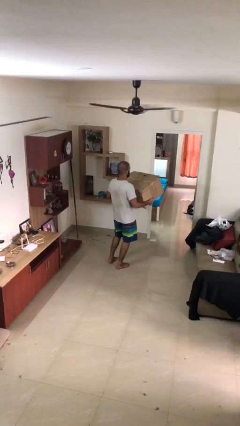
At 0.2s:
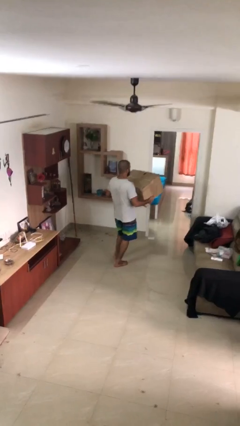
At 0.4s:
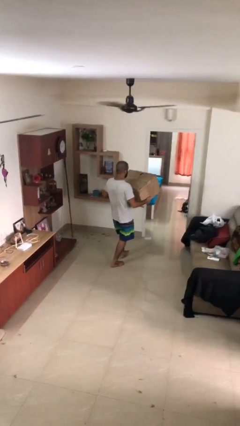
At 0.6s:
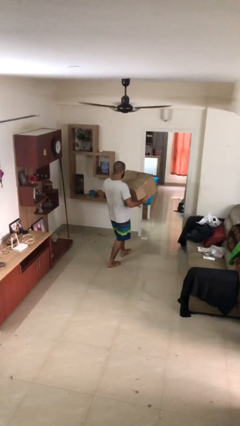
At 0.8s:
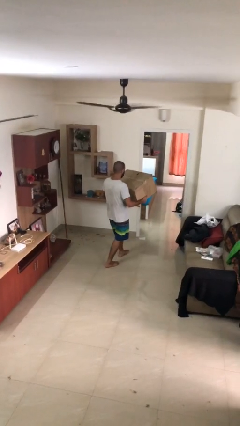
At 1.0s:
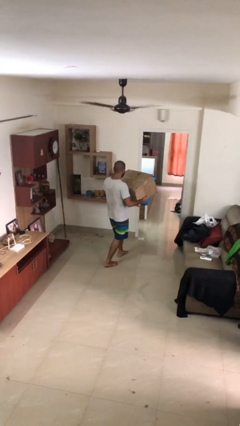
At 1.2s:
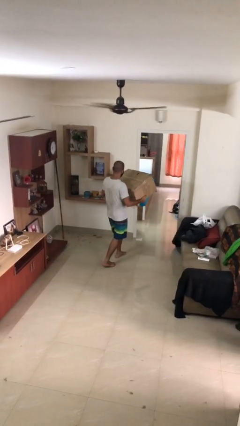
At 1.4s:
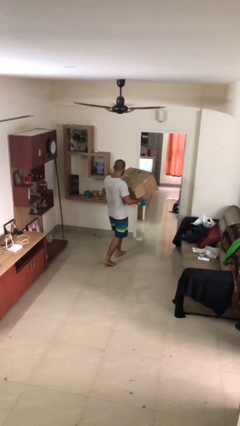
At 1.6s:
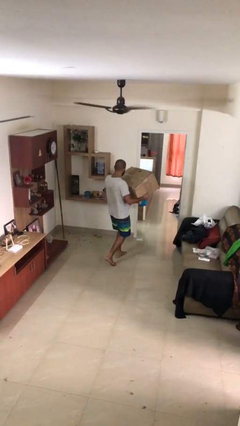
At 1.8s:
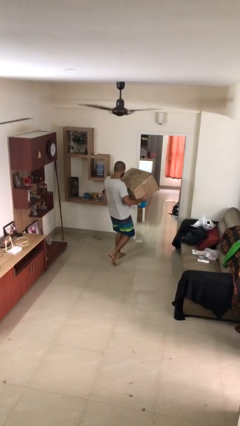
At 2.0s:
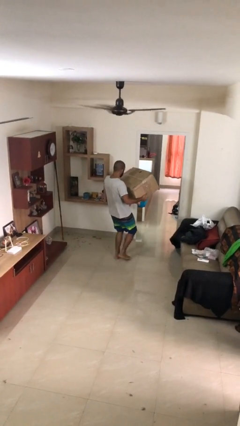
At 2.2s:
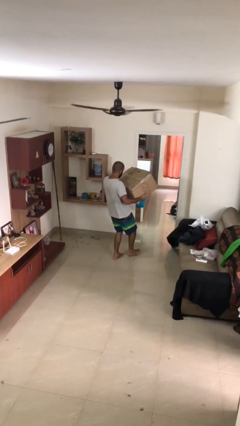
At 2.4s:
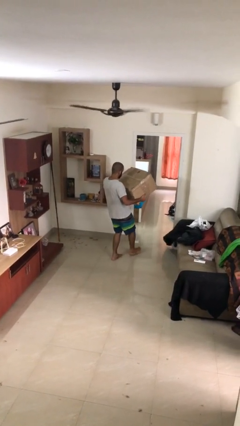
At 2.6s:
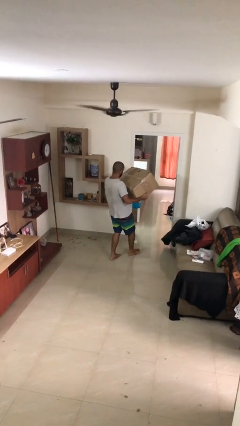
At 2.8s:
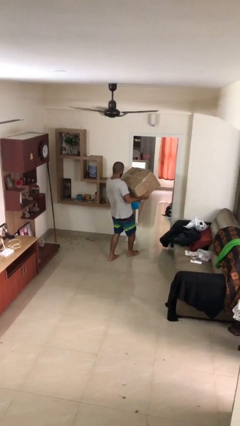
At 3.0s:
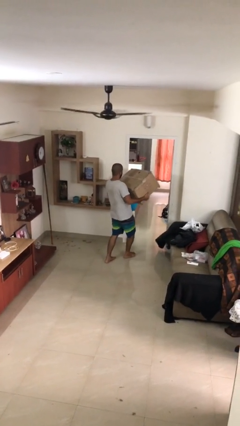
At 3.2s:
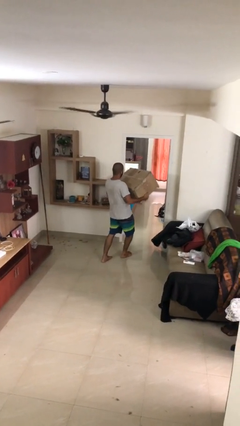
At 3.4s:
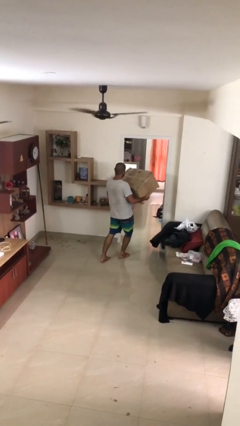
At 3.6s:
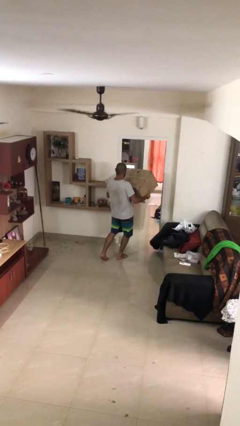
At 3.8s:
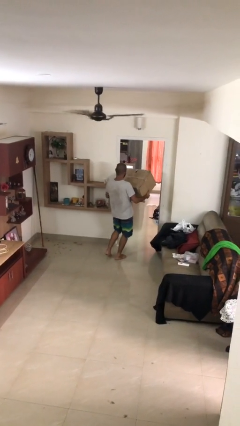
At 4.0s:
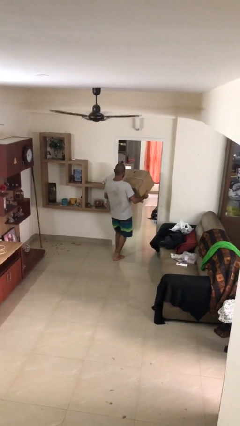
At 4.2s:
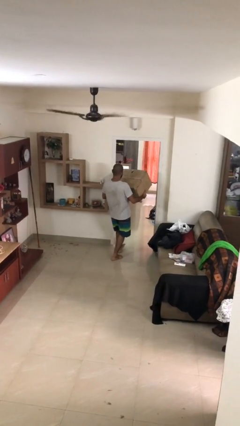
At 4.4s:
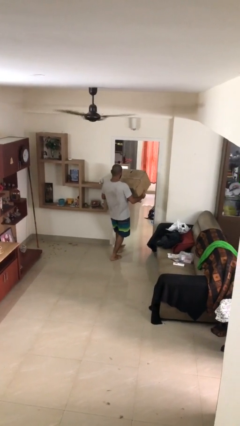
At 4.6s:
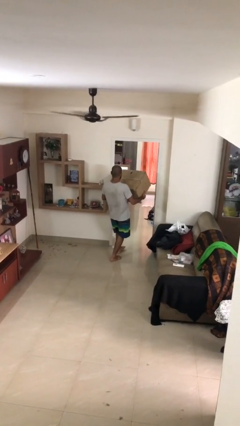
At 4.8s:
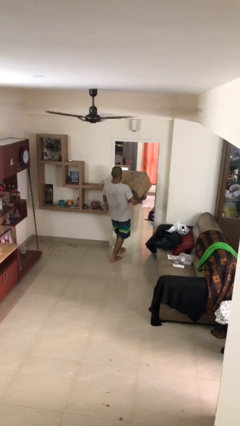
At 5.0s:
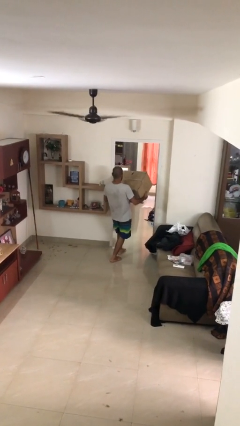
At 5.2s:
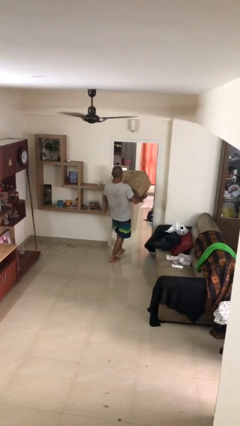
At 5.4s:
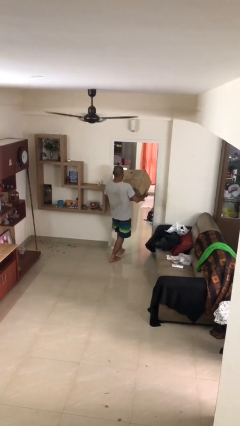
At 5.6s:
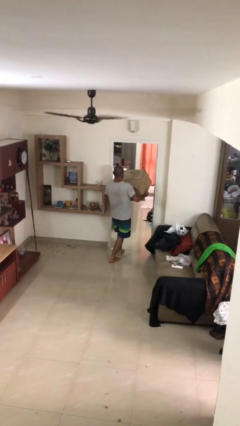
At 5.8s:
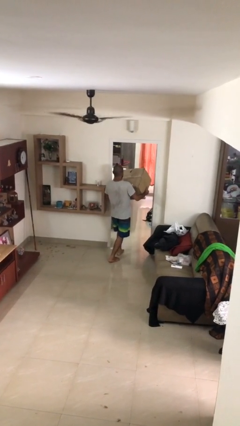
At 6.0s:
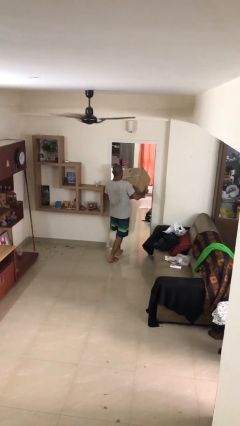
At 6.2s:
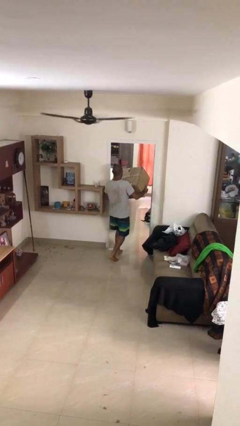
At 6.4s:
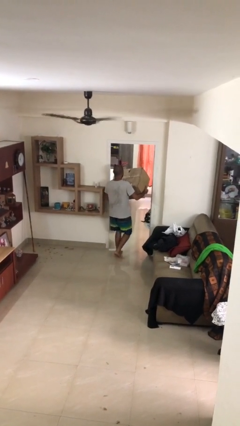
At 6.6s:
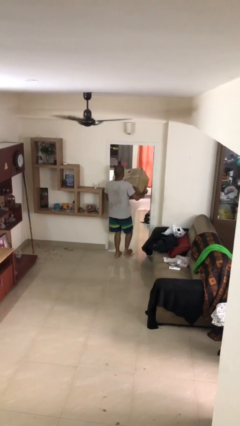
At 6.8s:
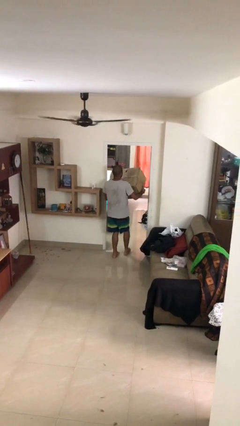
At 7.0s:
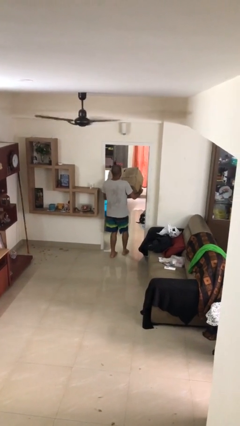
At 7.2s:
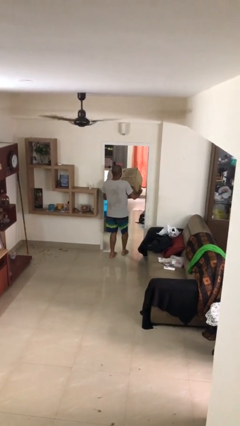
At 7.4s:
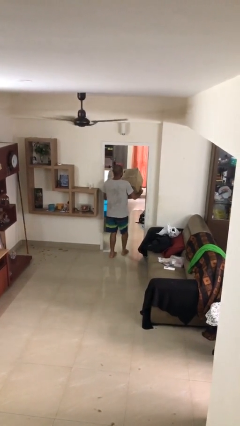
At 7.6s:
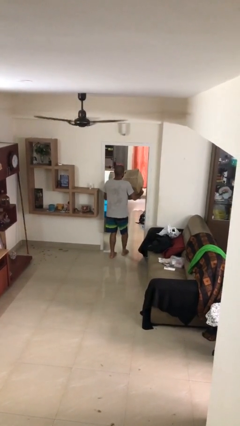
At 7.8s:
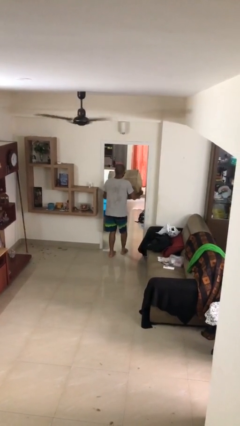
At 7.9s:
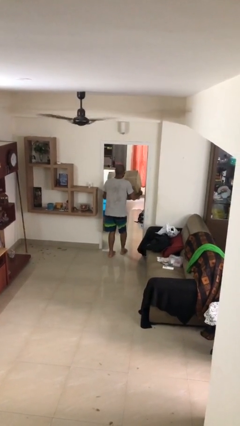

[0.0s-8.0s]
person carries heavy object

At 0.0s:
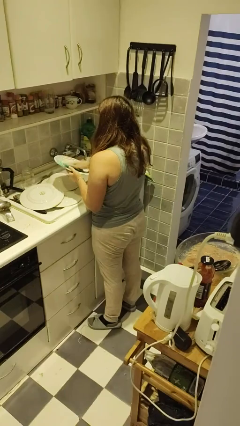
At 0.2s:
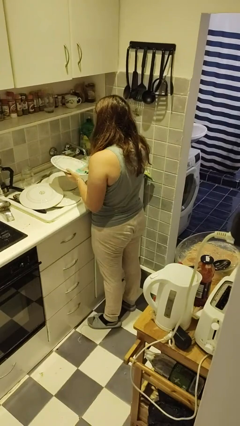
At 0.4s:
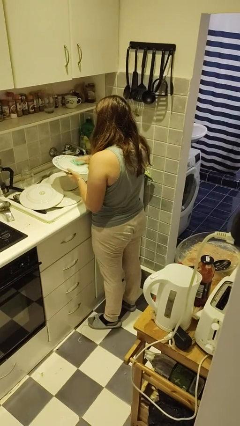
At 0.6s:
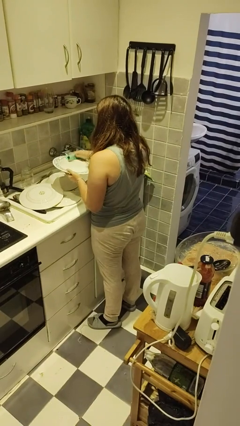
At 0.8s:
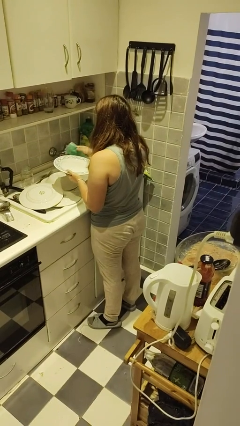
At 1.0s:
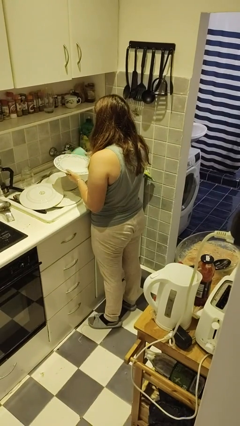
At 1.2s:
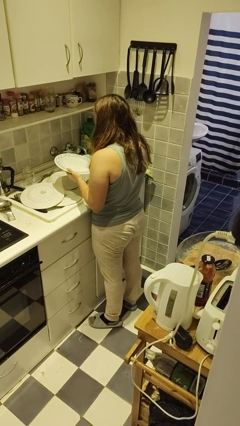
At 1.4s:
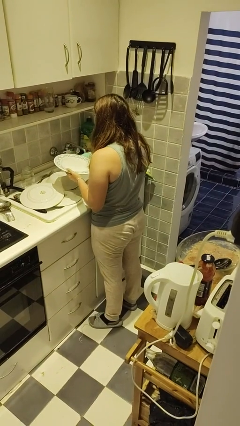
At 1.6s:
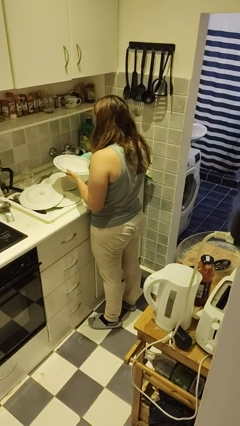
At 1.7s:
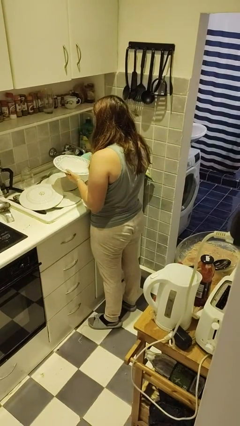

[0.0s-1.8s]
person dries dish

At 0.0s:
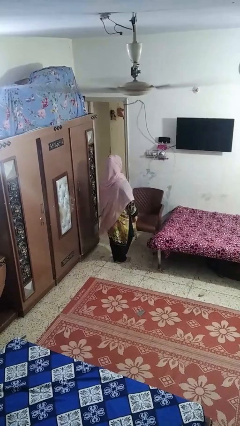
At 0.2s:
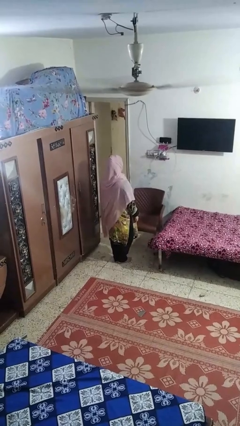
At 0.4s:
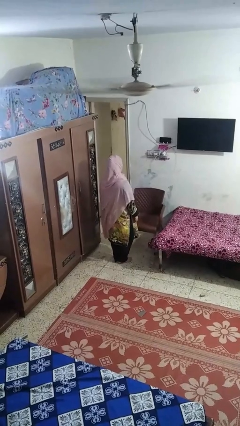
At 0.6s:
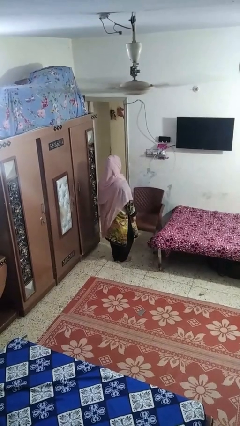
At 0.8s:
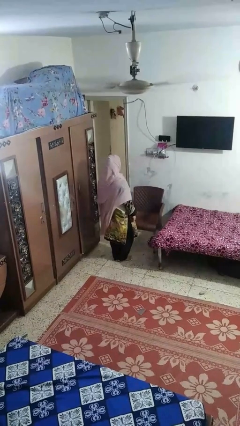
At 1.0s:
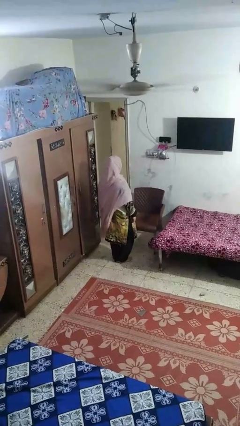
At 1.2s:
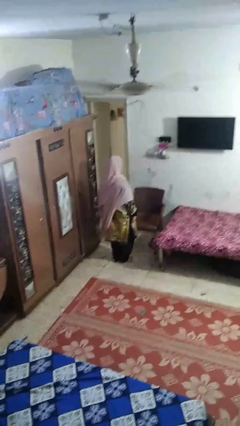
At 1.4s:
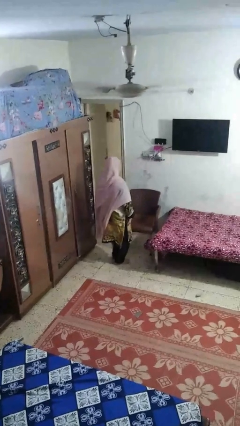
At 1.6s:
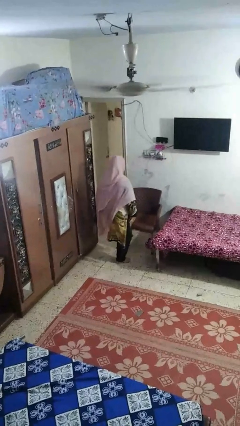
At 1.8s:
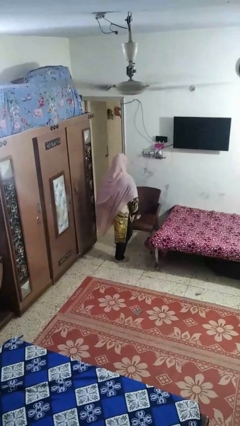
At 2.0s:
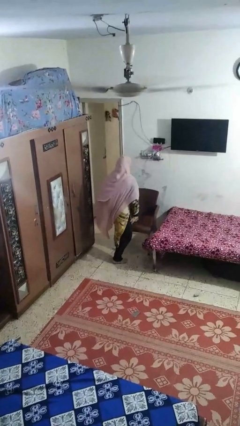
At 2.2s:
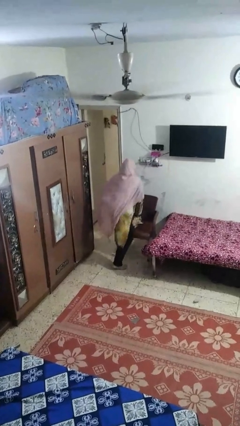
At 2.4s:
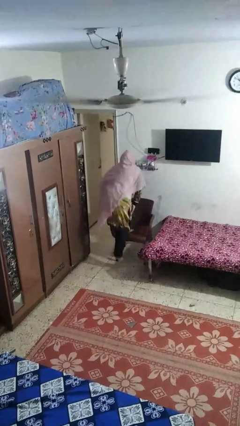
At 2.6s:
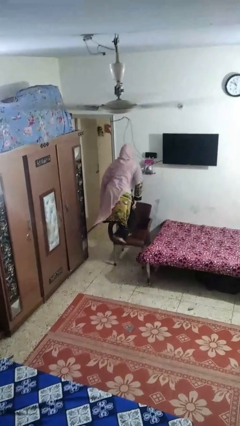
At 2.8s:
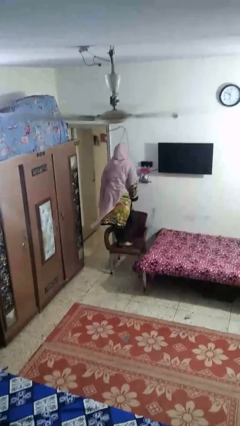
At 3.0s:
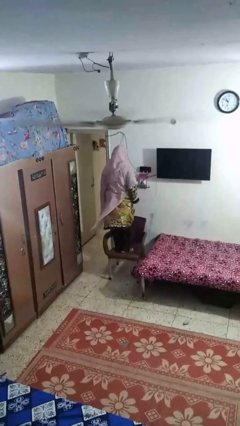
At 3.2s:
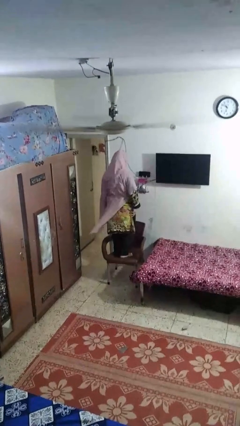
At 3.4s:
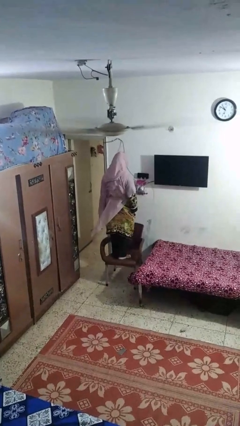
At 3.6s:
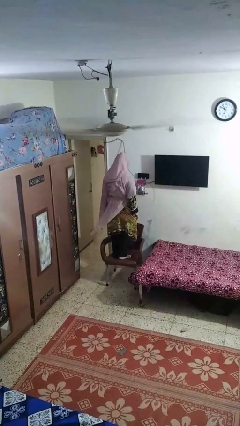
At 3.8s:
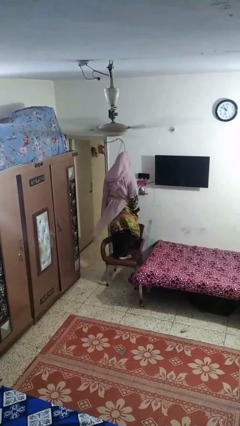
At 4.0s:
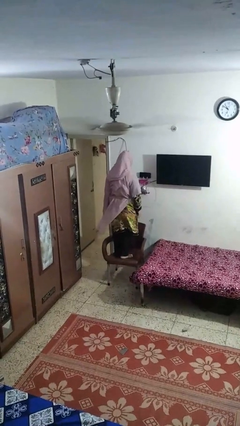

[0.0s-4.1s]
person climbs on chair

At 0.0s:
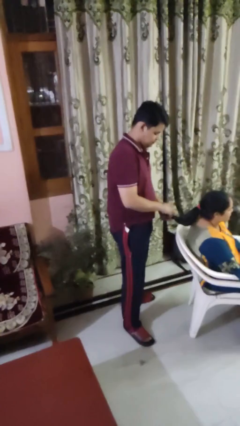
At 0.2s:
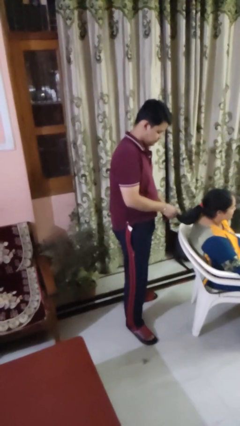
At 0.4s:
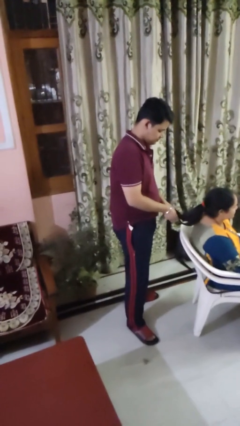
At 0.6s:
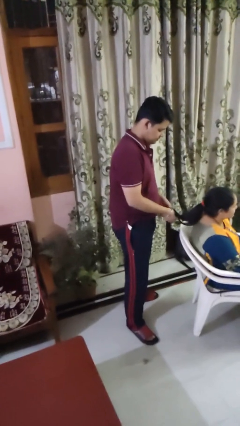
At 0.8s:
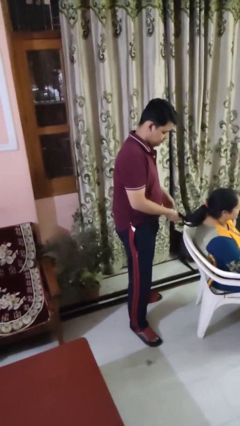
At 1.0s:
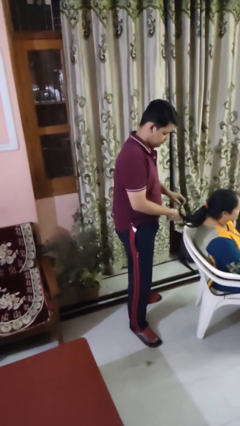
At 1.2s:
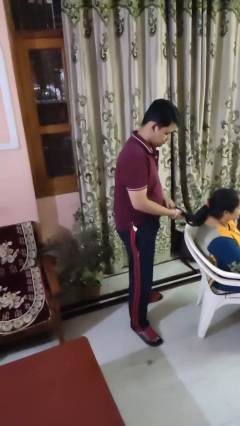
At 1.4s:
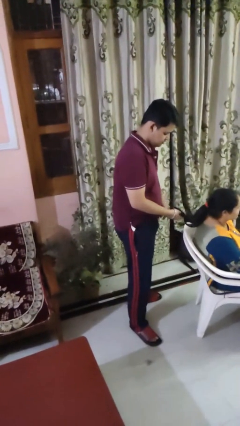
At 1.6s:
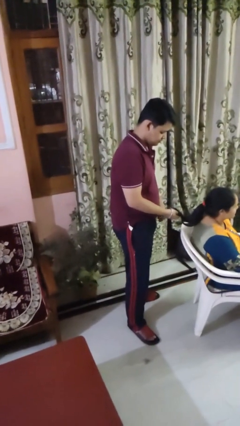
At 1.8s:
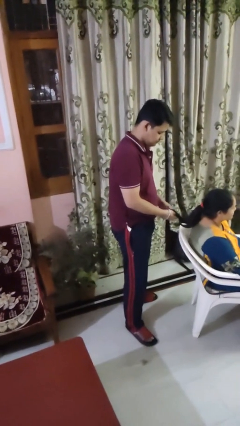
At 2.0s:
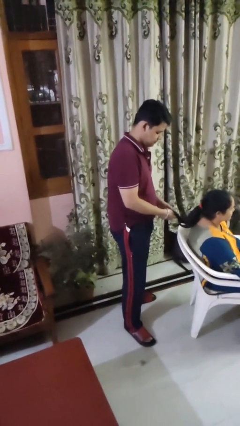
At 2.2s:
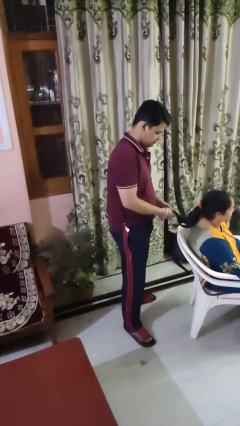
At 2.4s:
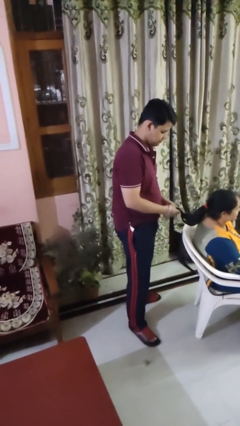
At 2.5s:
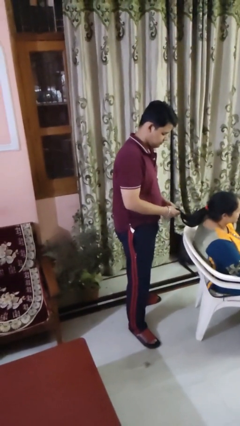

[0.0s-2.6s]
person braids hair of person

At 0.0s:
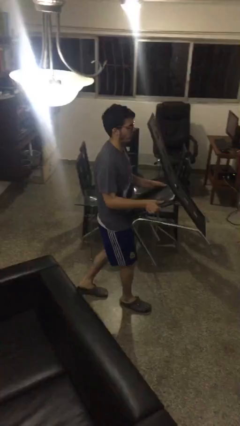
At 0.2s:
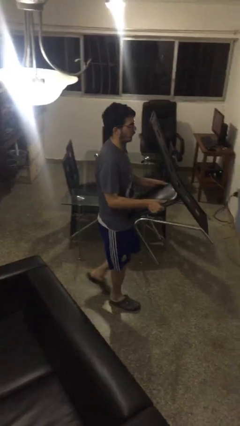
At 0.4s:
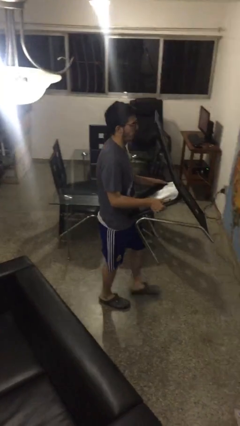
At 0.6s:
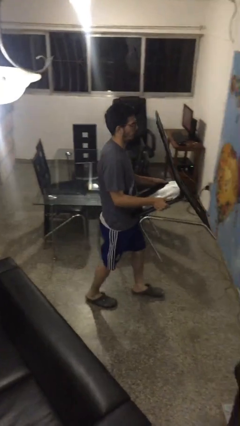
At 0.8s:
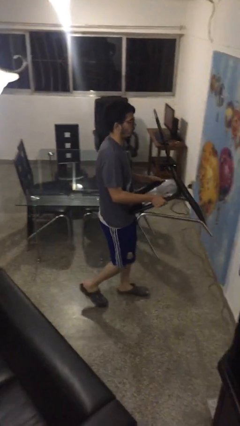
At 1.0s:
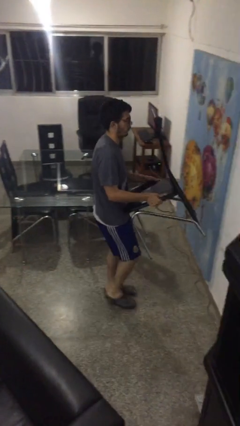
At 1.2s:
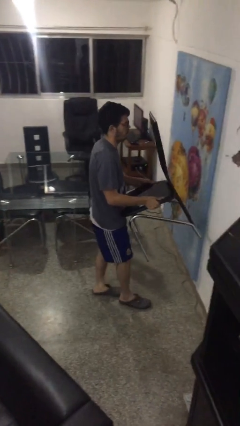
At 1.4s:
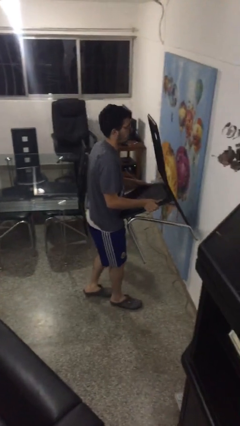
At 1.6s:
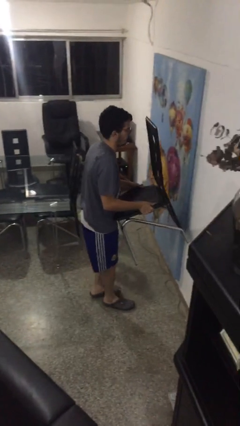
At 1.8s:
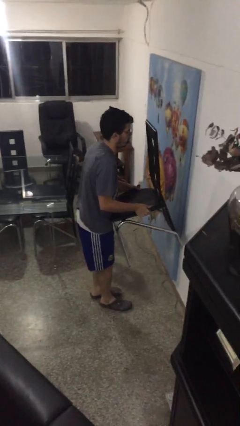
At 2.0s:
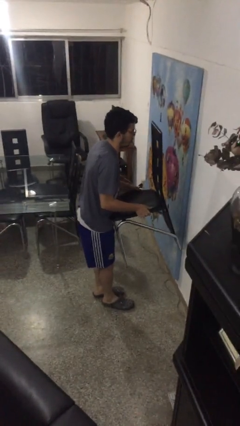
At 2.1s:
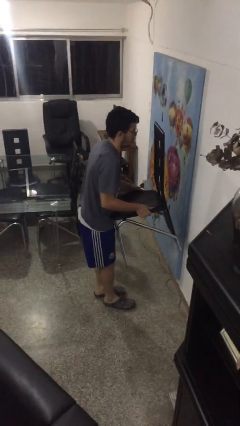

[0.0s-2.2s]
person carries furniture
